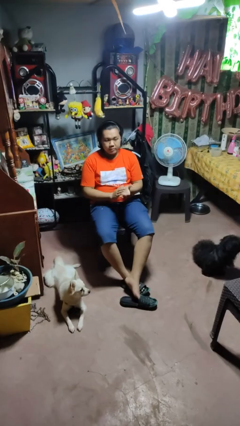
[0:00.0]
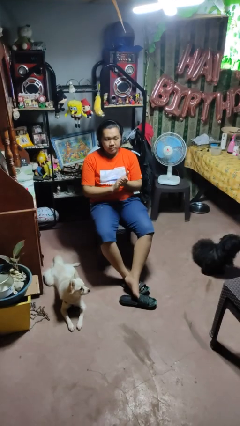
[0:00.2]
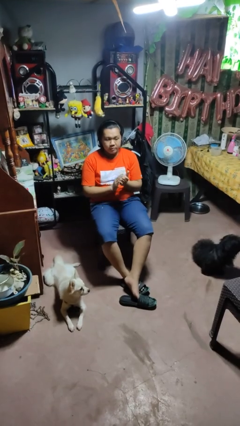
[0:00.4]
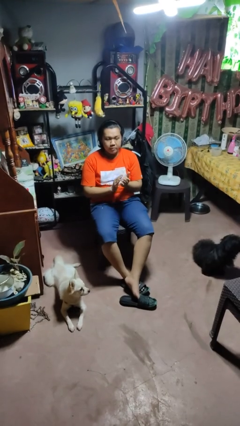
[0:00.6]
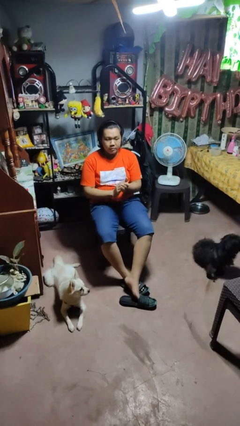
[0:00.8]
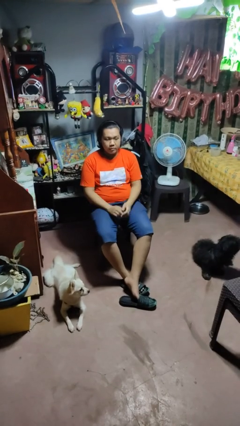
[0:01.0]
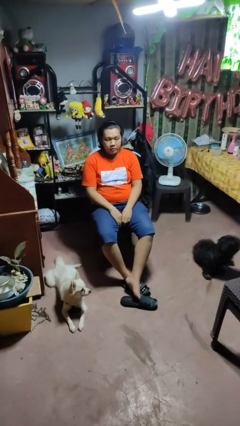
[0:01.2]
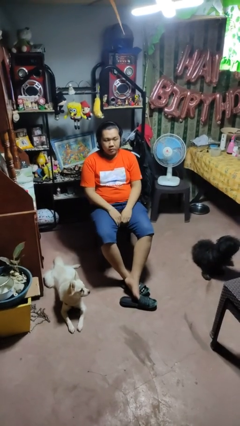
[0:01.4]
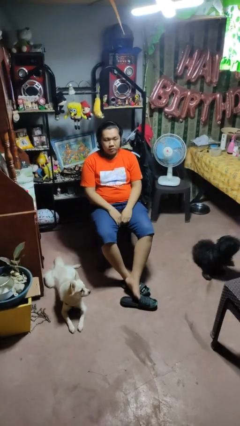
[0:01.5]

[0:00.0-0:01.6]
person claps hands

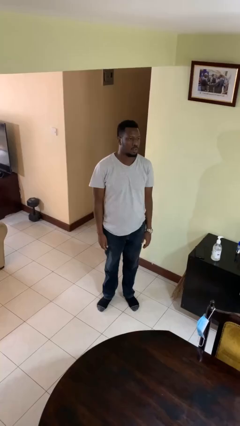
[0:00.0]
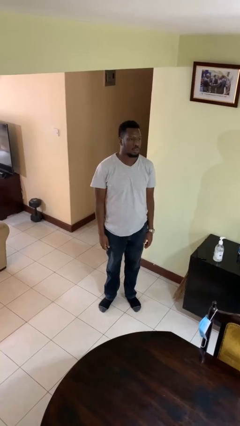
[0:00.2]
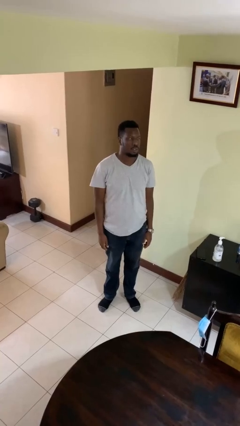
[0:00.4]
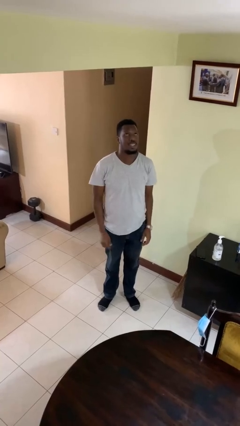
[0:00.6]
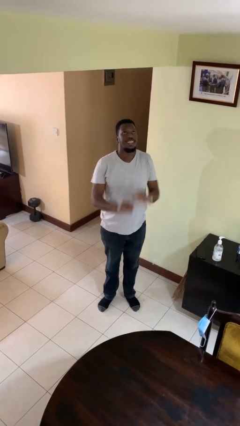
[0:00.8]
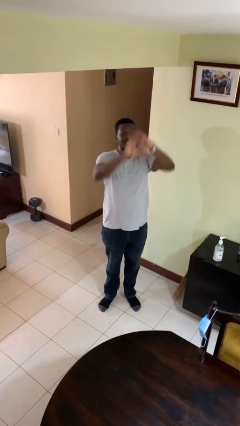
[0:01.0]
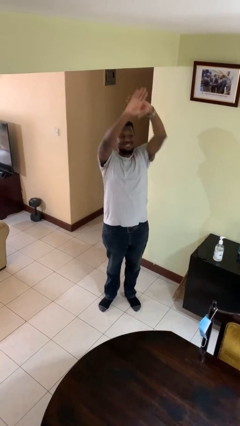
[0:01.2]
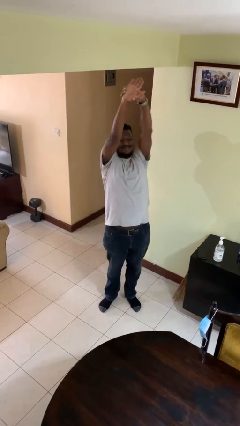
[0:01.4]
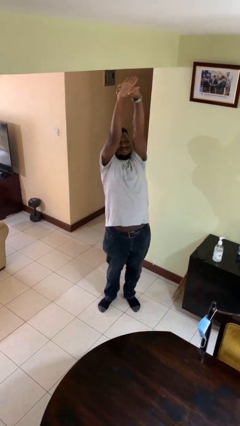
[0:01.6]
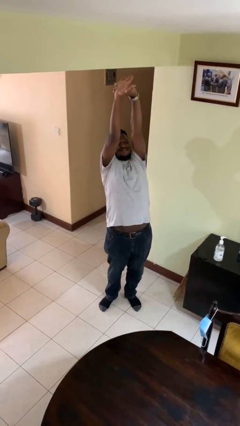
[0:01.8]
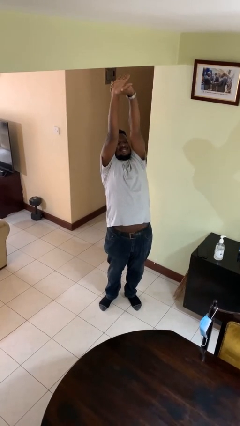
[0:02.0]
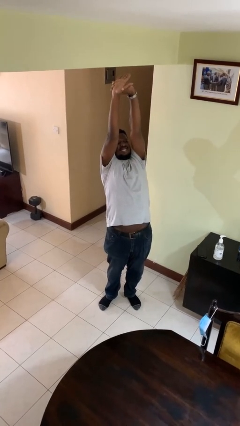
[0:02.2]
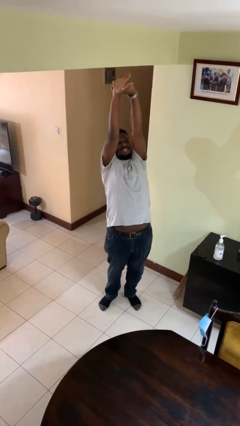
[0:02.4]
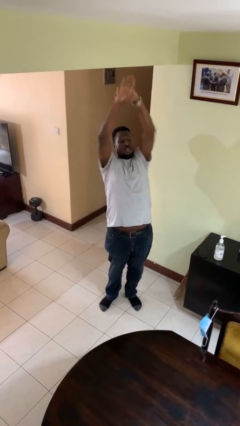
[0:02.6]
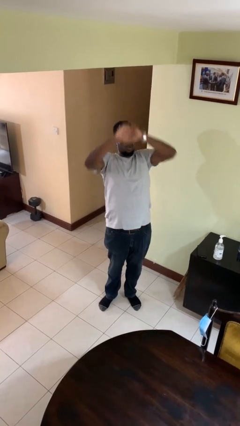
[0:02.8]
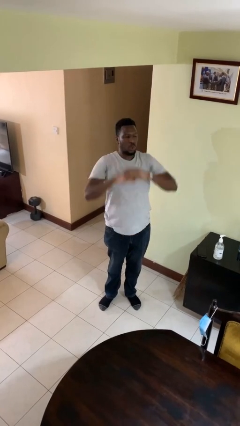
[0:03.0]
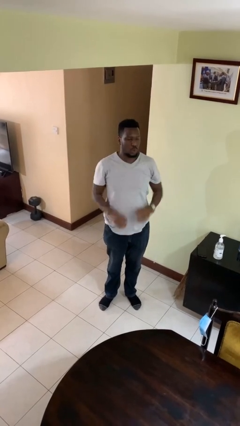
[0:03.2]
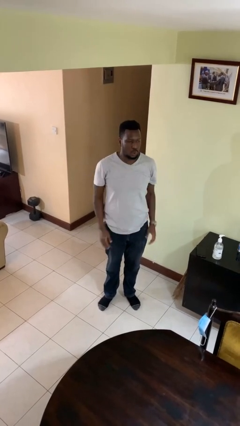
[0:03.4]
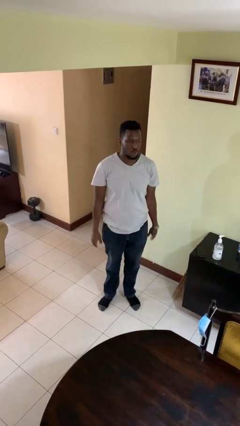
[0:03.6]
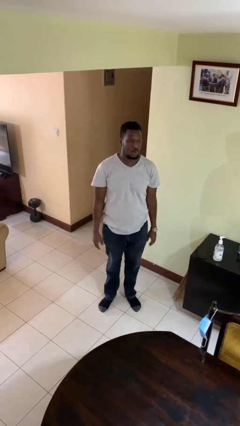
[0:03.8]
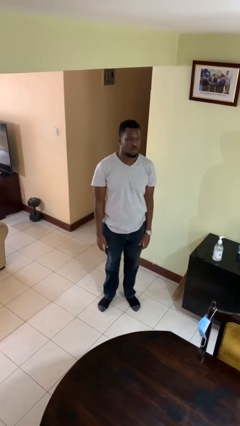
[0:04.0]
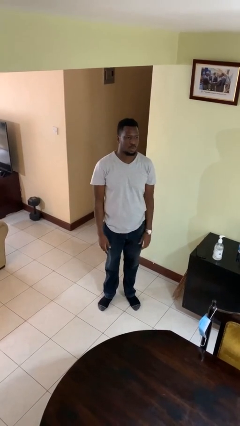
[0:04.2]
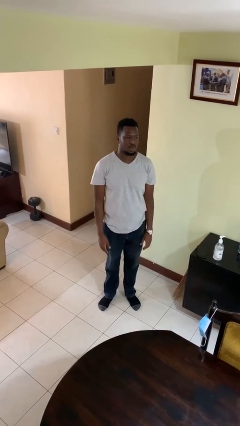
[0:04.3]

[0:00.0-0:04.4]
person stretches arms over head

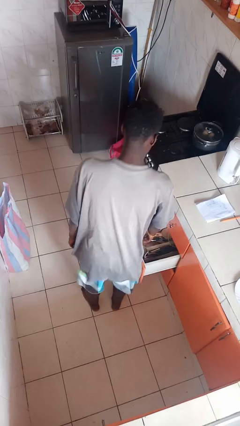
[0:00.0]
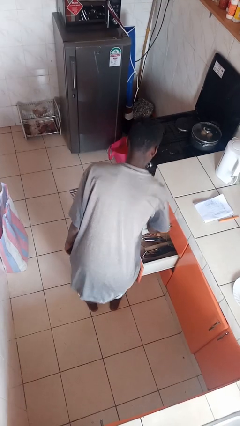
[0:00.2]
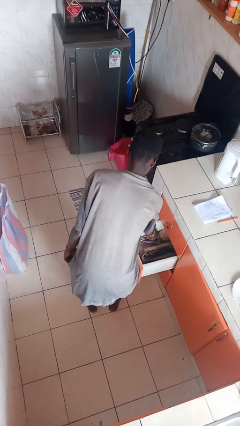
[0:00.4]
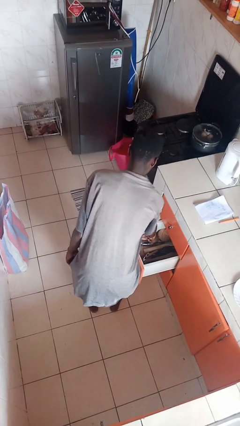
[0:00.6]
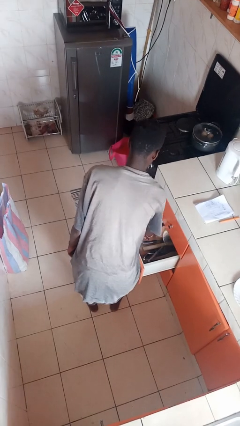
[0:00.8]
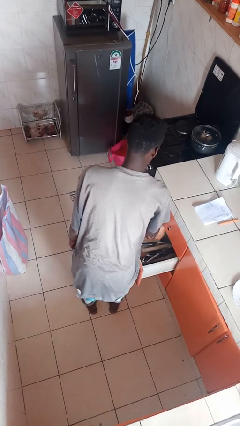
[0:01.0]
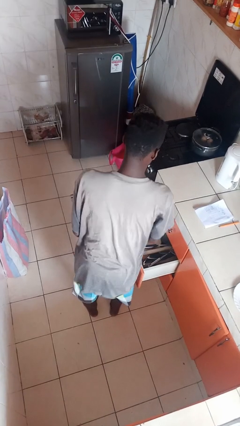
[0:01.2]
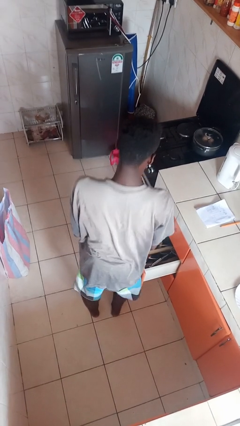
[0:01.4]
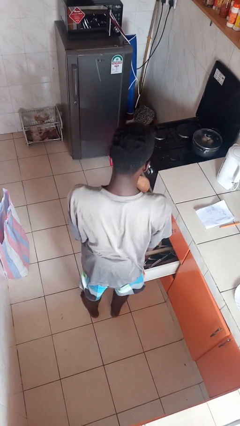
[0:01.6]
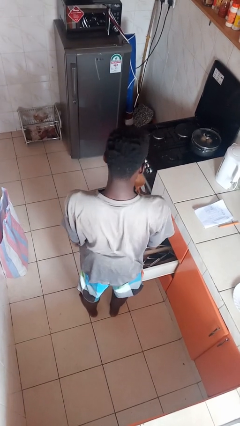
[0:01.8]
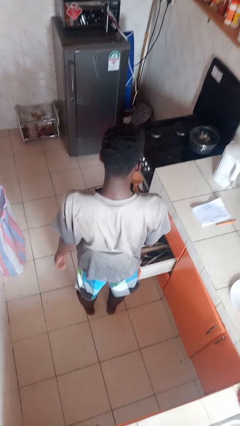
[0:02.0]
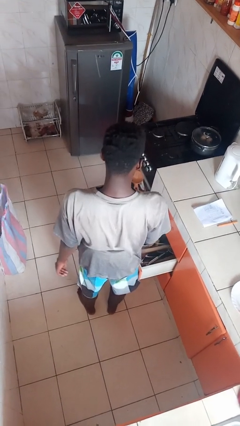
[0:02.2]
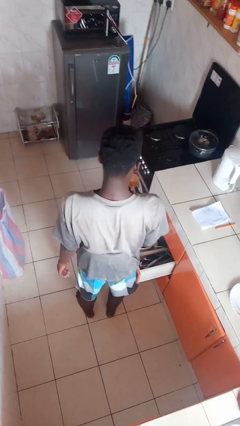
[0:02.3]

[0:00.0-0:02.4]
person takes object from kitchen drawer

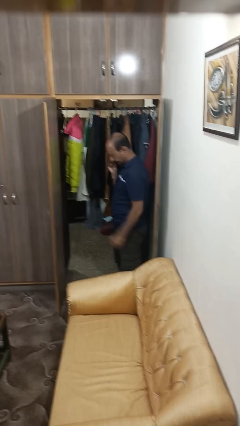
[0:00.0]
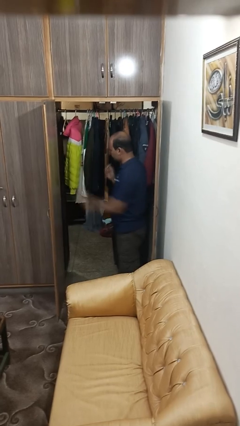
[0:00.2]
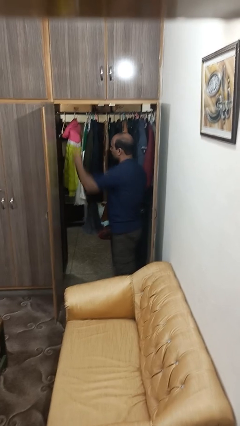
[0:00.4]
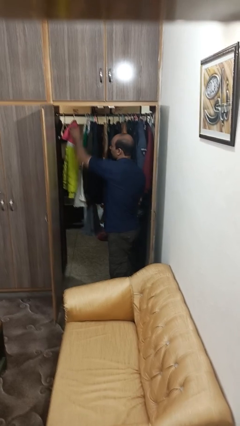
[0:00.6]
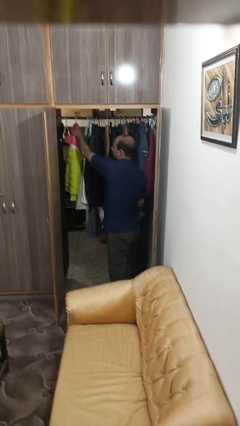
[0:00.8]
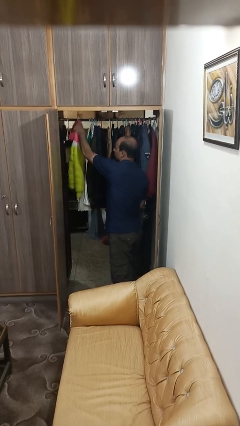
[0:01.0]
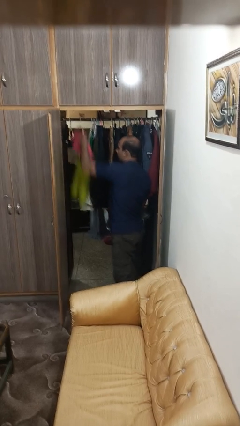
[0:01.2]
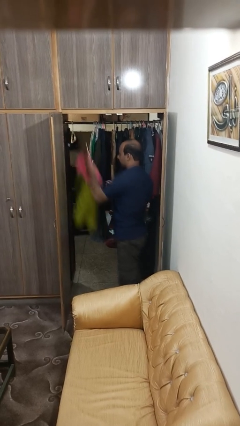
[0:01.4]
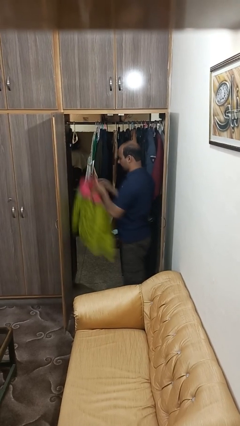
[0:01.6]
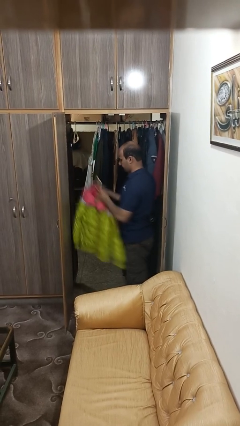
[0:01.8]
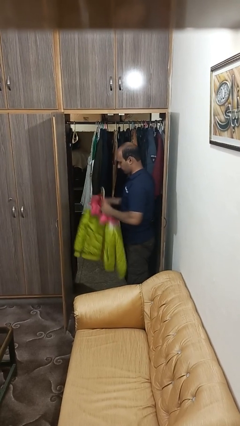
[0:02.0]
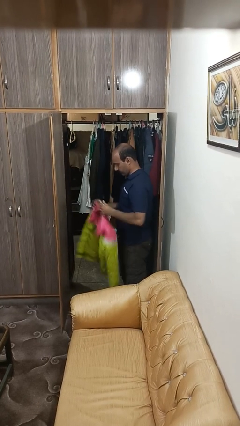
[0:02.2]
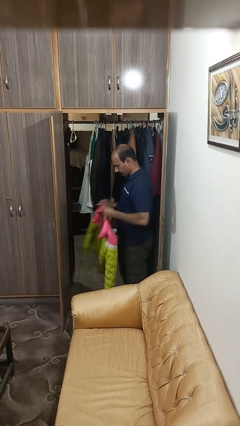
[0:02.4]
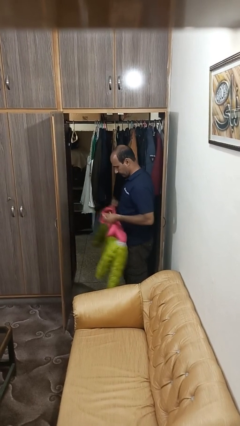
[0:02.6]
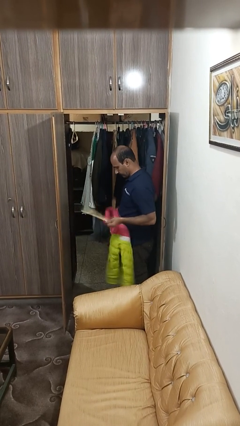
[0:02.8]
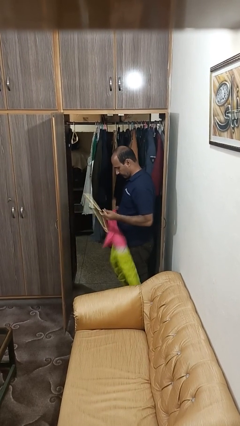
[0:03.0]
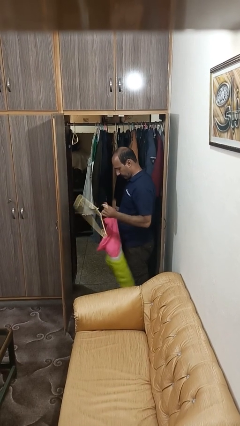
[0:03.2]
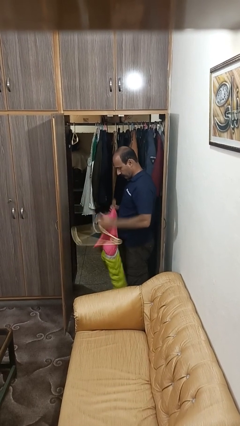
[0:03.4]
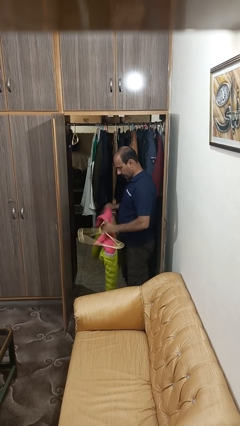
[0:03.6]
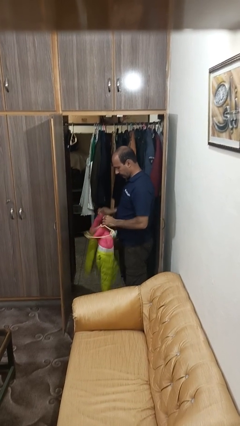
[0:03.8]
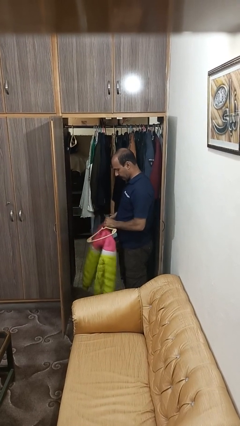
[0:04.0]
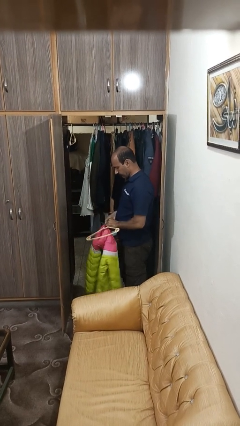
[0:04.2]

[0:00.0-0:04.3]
person takes clothes from closet

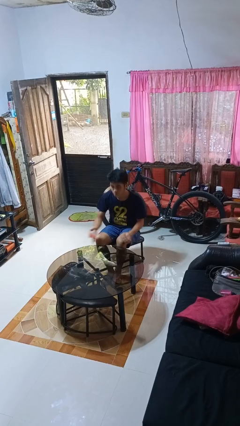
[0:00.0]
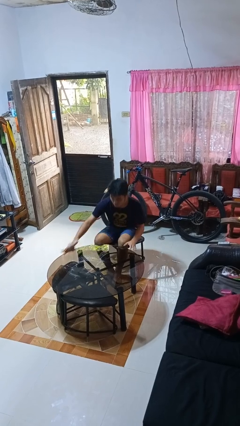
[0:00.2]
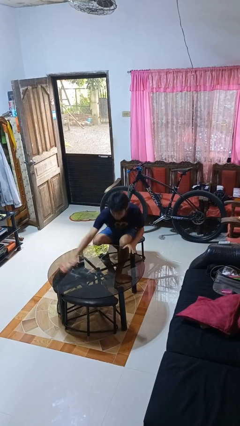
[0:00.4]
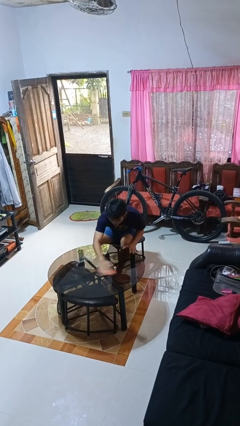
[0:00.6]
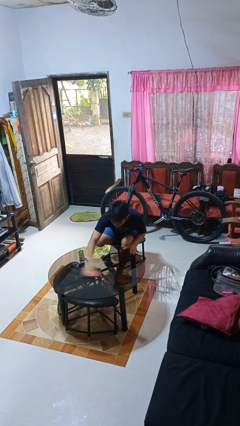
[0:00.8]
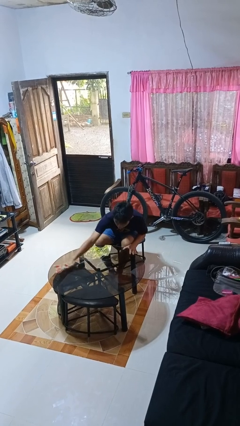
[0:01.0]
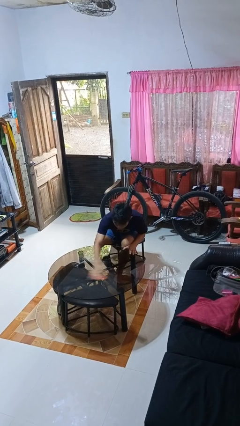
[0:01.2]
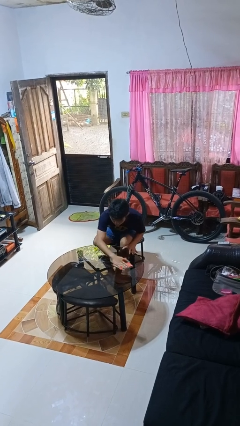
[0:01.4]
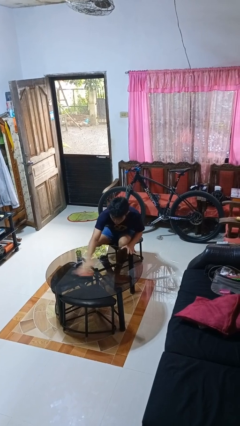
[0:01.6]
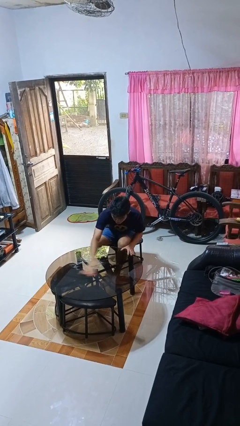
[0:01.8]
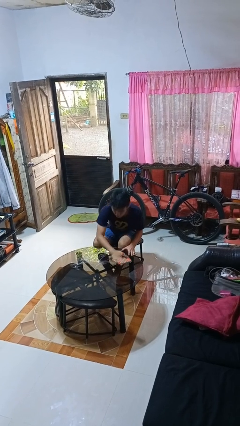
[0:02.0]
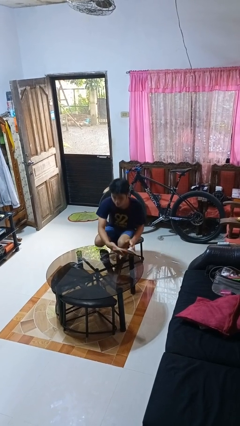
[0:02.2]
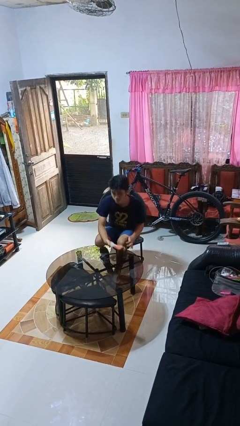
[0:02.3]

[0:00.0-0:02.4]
person cleans table with rag

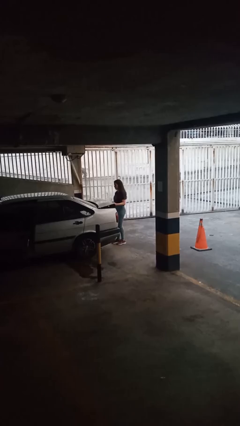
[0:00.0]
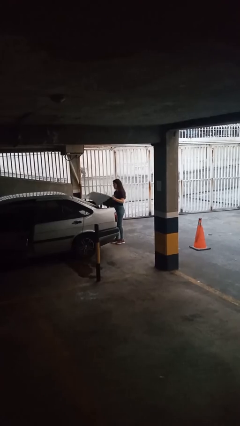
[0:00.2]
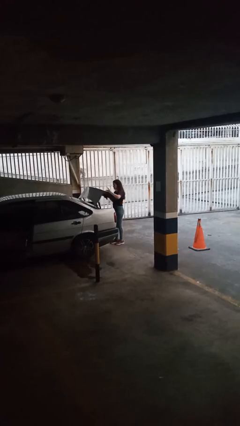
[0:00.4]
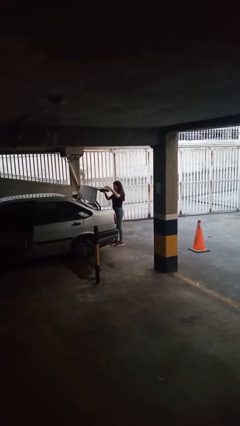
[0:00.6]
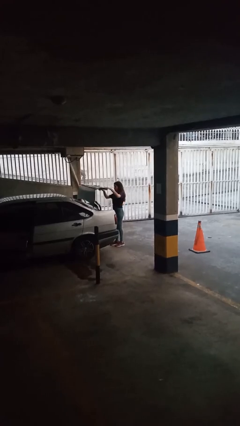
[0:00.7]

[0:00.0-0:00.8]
person opens car trunk

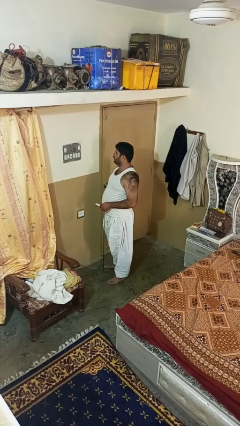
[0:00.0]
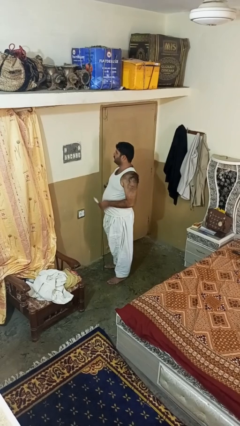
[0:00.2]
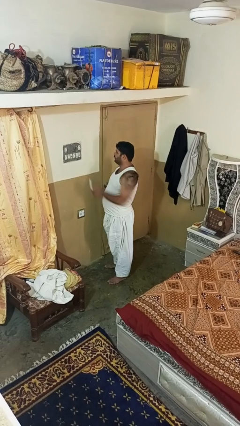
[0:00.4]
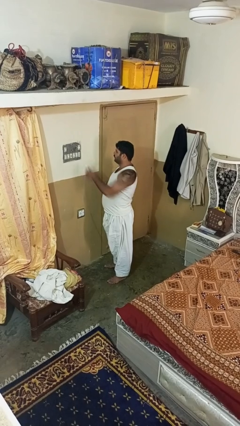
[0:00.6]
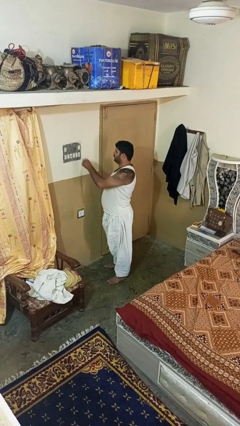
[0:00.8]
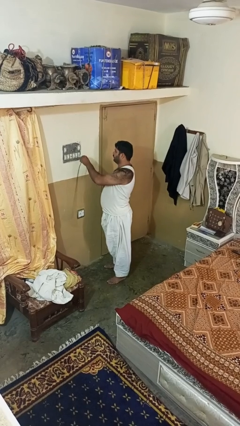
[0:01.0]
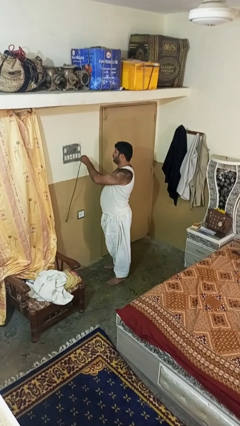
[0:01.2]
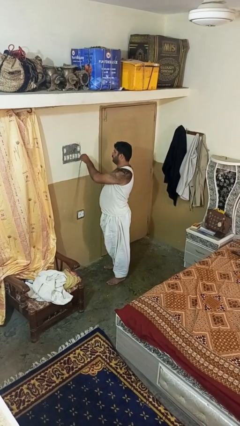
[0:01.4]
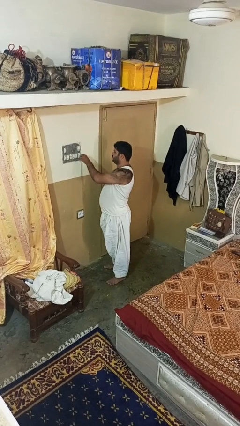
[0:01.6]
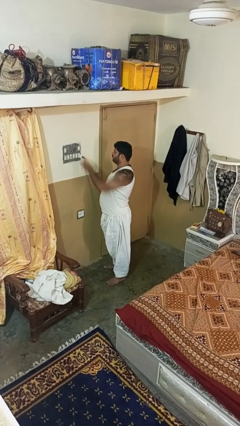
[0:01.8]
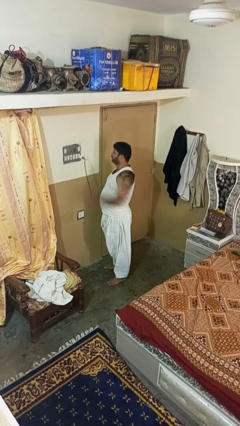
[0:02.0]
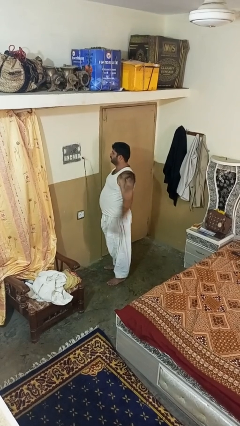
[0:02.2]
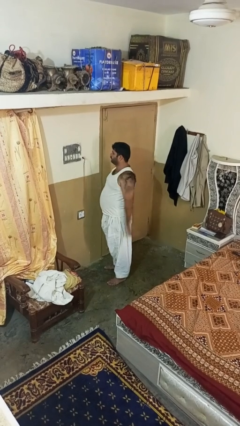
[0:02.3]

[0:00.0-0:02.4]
person plugs into electrical socket
